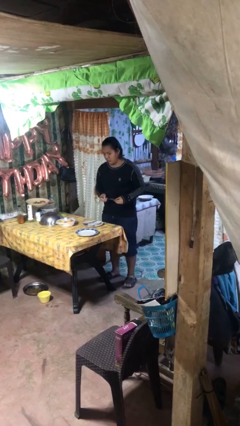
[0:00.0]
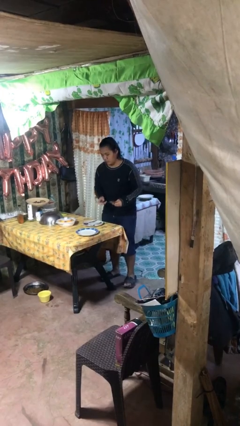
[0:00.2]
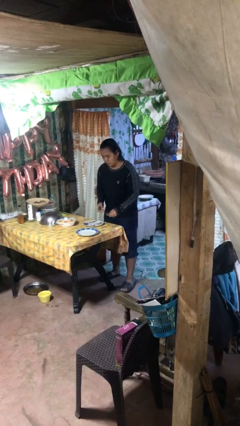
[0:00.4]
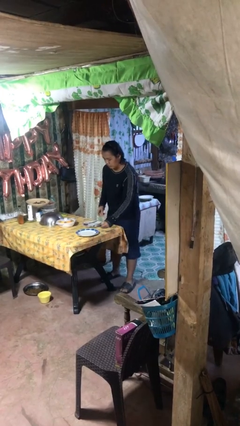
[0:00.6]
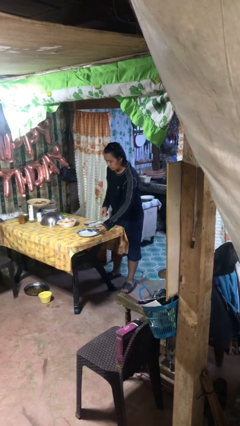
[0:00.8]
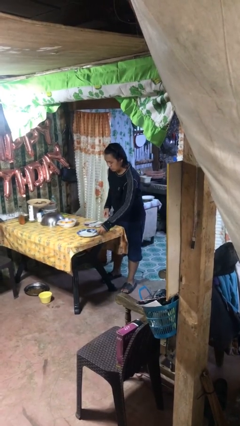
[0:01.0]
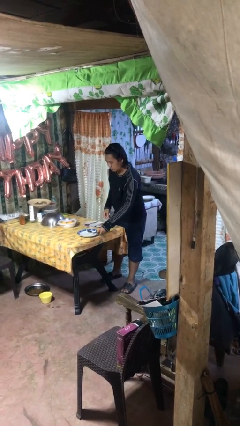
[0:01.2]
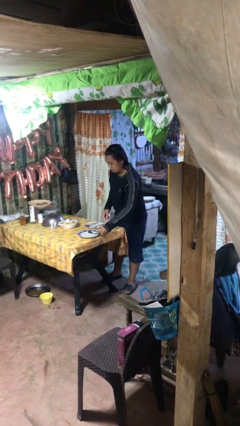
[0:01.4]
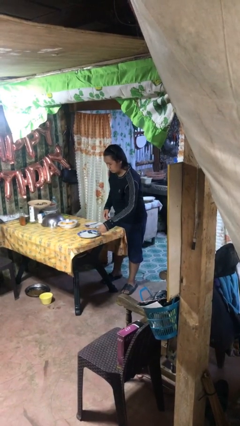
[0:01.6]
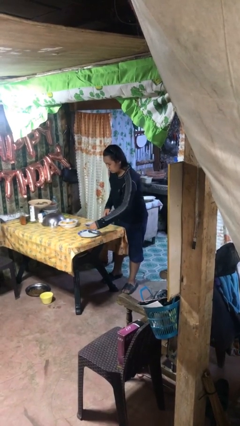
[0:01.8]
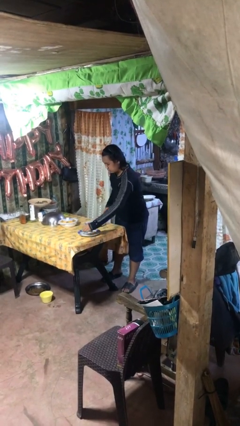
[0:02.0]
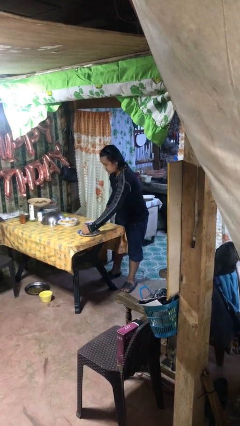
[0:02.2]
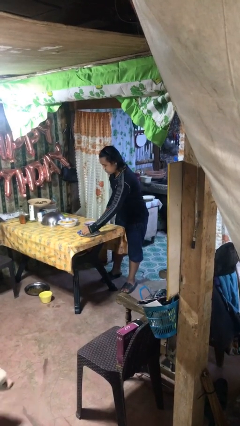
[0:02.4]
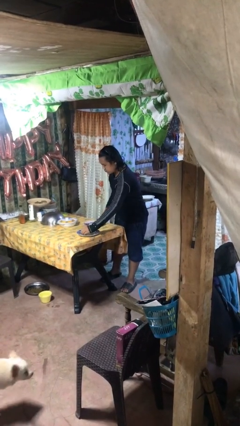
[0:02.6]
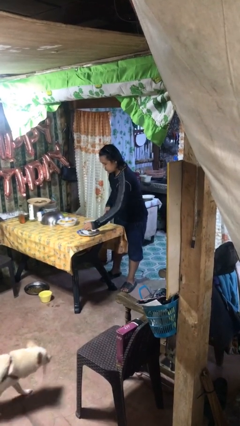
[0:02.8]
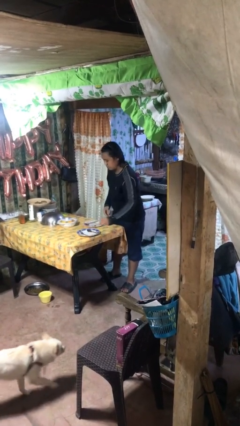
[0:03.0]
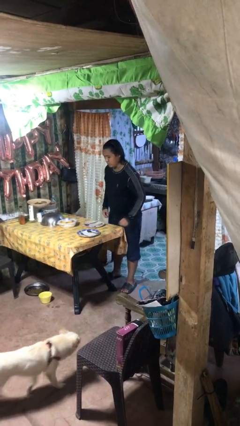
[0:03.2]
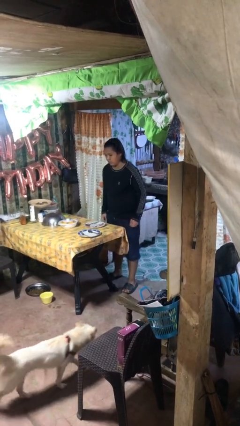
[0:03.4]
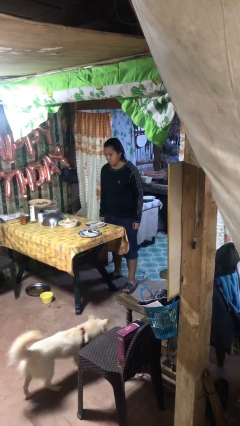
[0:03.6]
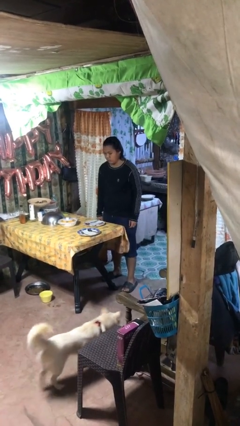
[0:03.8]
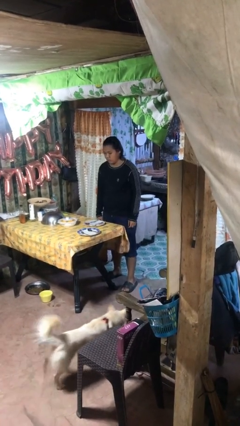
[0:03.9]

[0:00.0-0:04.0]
person sets table

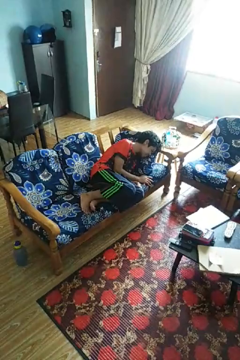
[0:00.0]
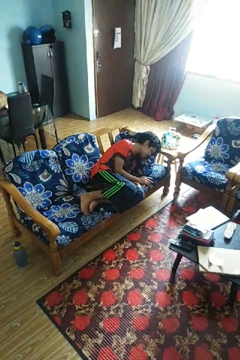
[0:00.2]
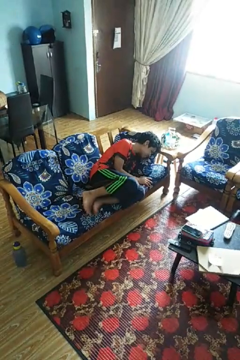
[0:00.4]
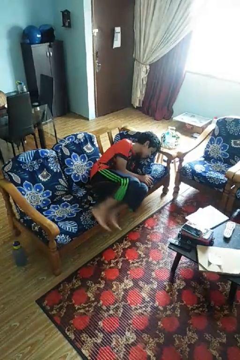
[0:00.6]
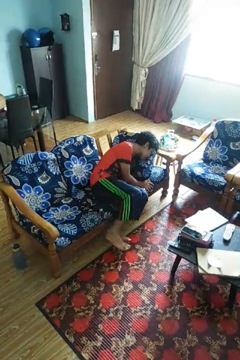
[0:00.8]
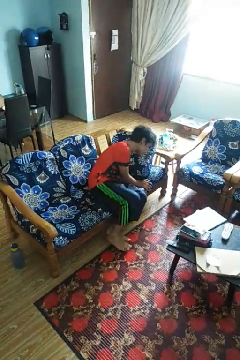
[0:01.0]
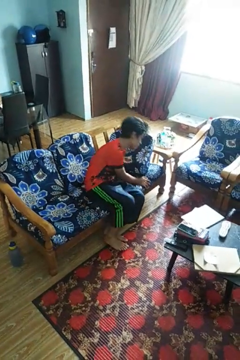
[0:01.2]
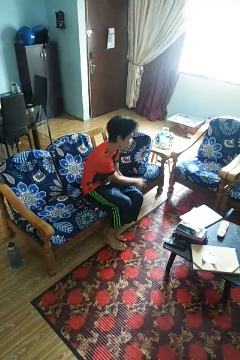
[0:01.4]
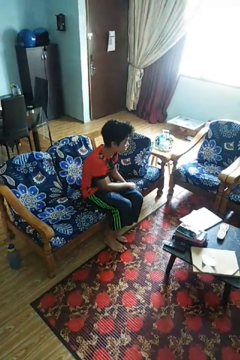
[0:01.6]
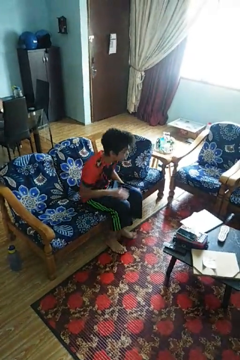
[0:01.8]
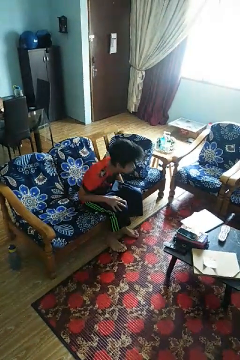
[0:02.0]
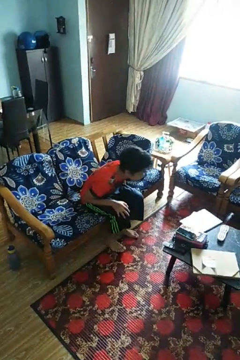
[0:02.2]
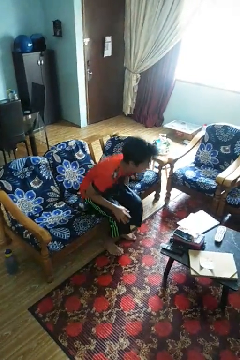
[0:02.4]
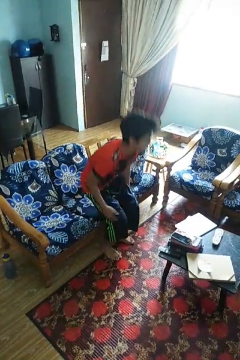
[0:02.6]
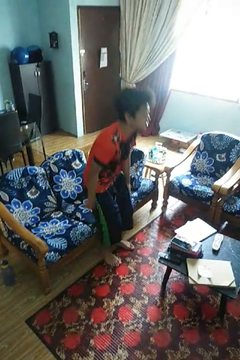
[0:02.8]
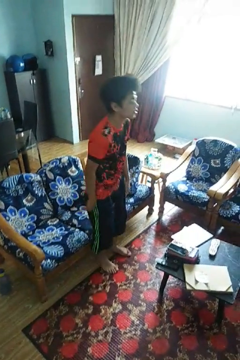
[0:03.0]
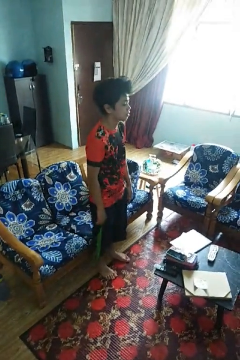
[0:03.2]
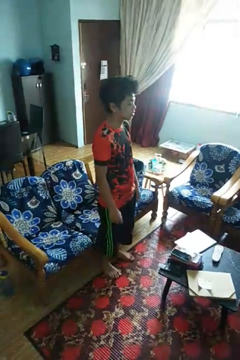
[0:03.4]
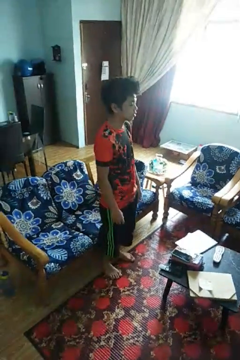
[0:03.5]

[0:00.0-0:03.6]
person stands up

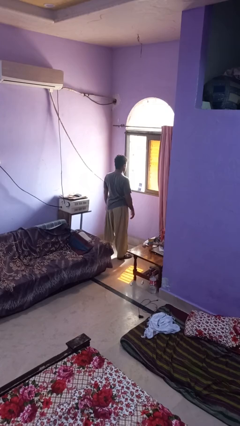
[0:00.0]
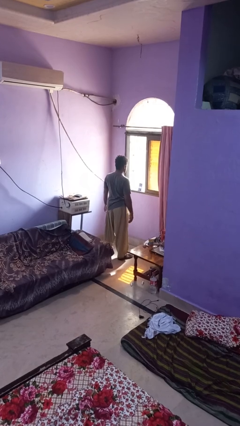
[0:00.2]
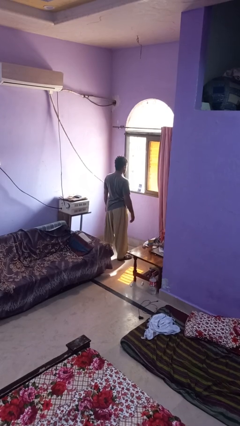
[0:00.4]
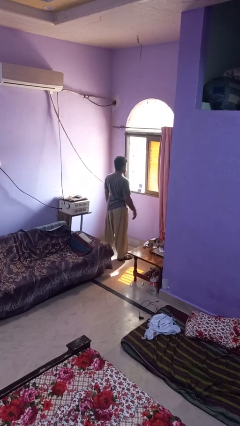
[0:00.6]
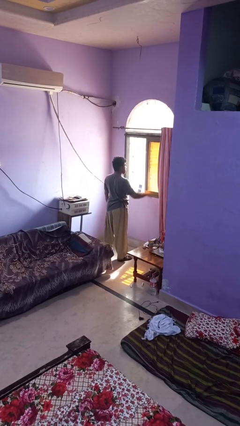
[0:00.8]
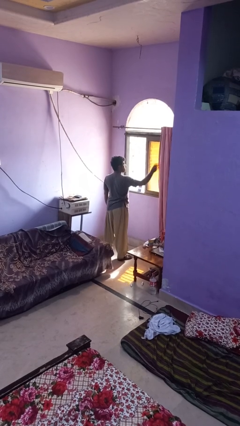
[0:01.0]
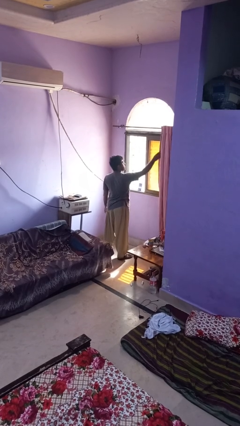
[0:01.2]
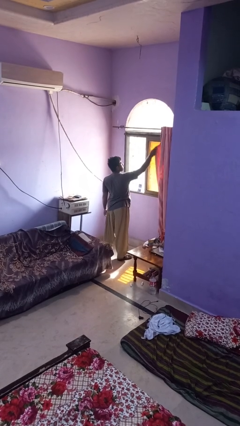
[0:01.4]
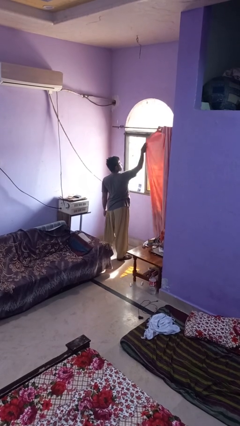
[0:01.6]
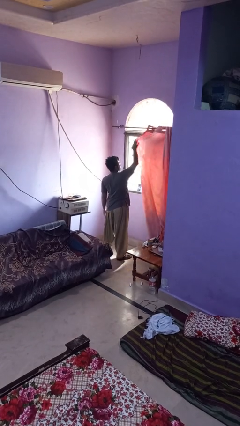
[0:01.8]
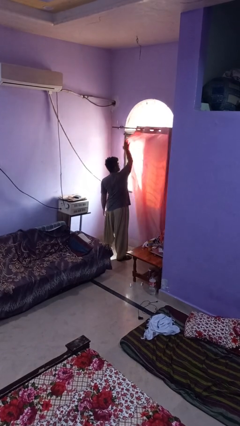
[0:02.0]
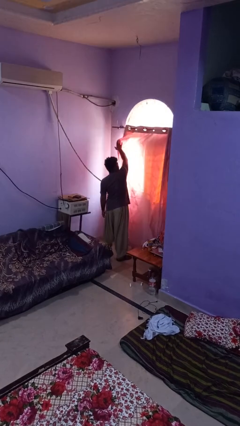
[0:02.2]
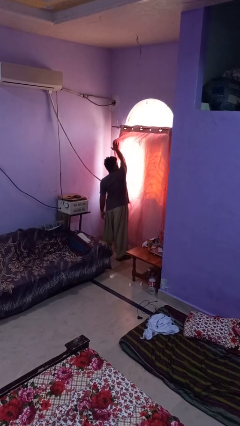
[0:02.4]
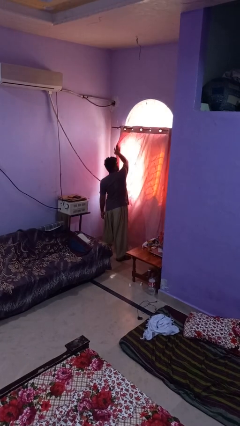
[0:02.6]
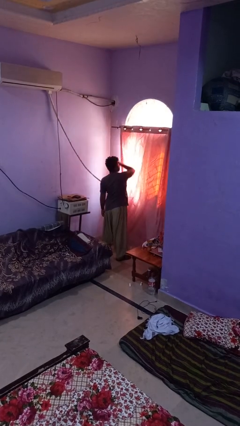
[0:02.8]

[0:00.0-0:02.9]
person closes curtains

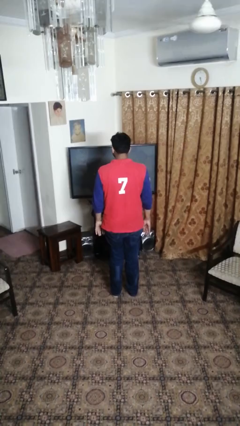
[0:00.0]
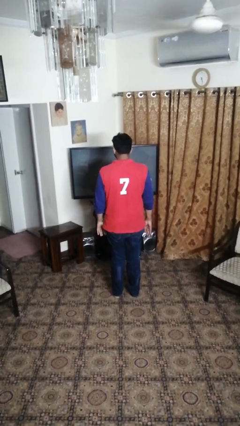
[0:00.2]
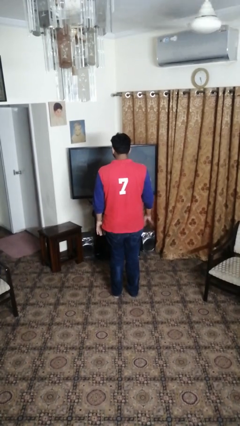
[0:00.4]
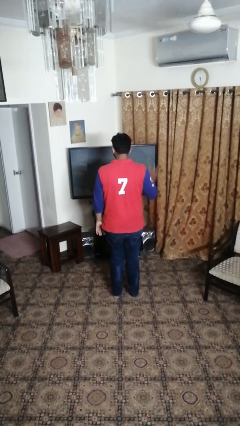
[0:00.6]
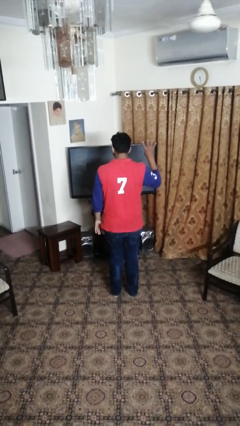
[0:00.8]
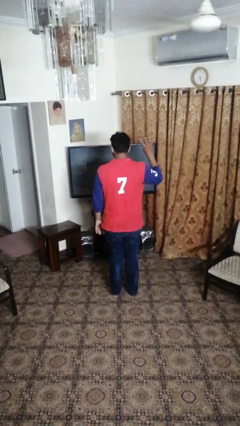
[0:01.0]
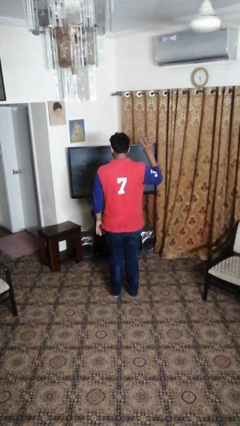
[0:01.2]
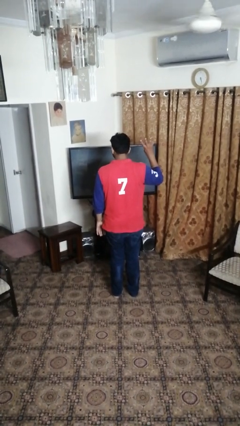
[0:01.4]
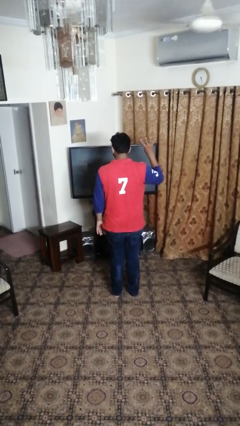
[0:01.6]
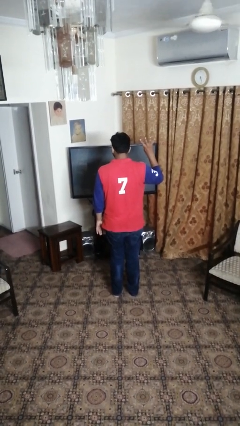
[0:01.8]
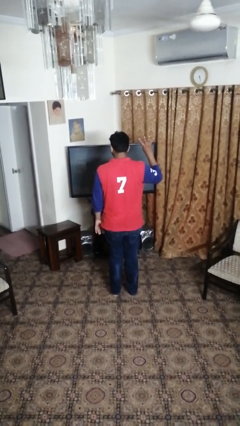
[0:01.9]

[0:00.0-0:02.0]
person gestures number four

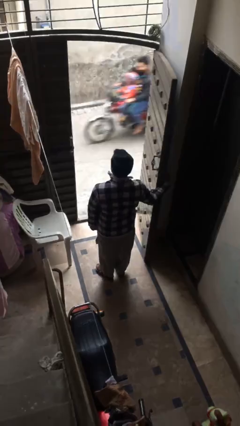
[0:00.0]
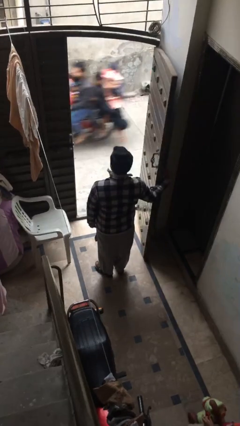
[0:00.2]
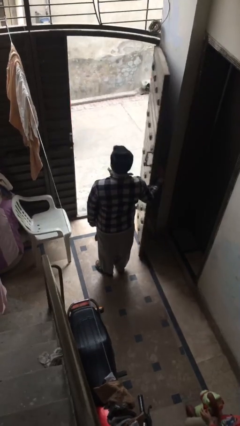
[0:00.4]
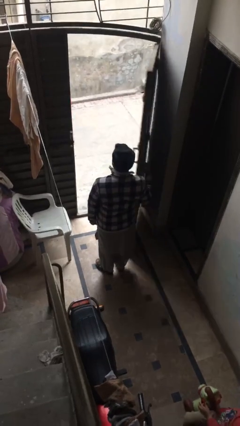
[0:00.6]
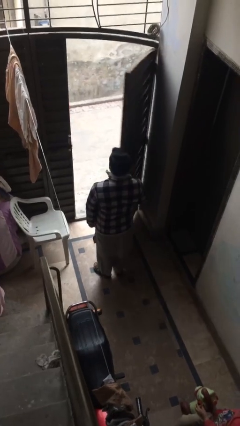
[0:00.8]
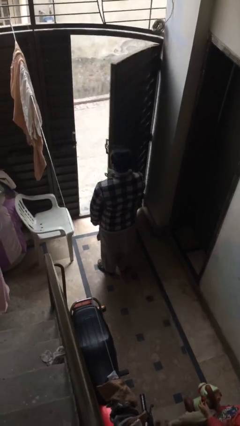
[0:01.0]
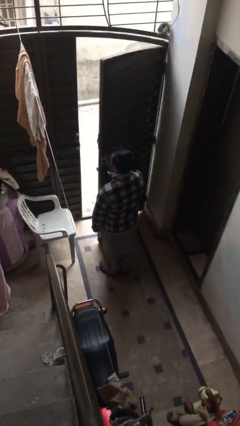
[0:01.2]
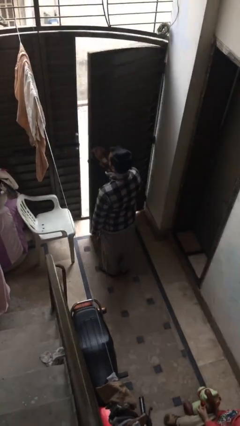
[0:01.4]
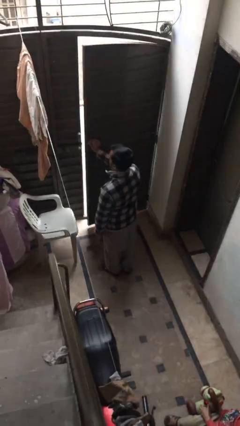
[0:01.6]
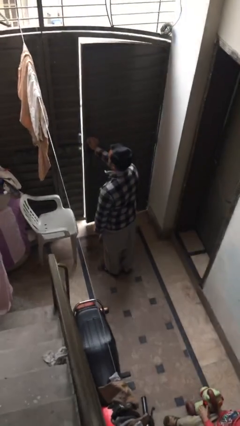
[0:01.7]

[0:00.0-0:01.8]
person closes facility door

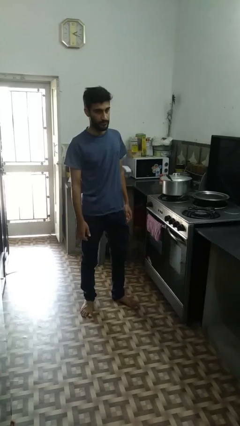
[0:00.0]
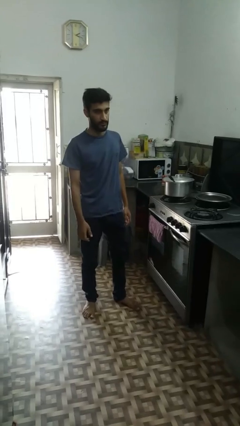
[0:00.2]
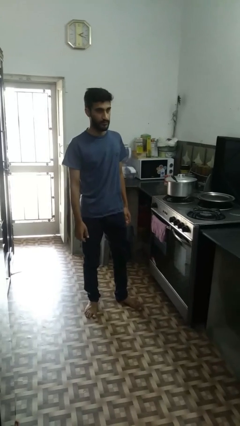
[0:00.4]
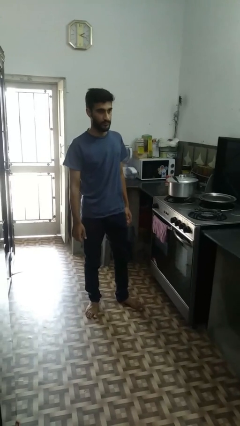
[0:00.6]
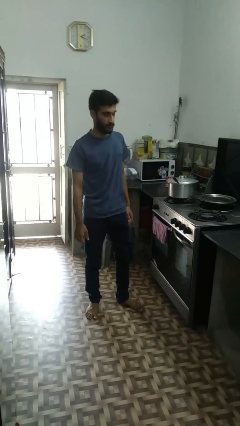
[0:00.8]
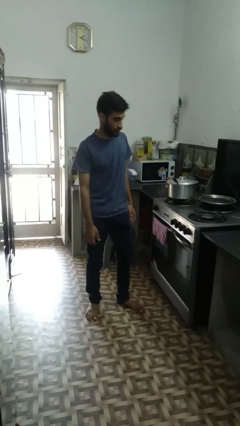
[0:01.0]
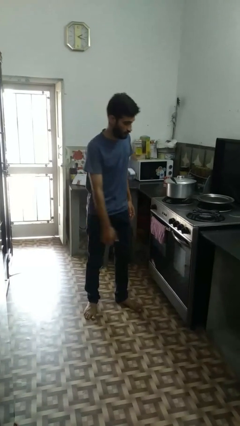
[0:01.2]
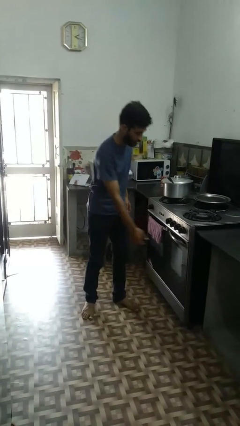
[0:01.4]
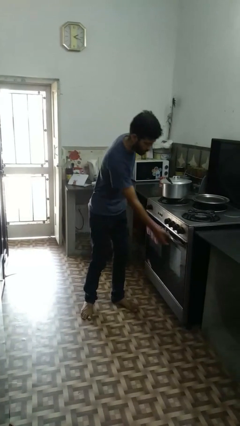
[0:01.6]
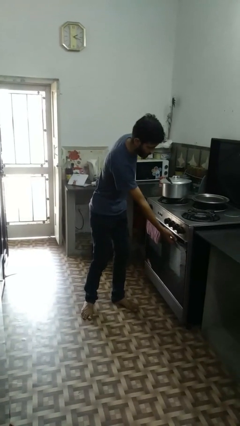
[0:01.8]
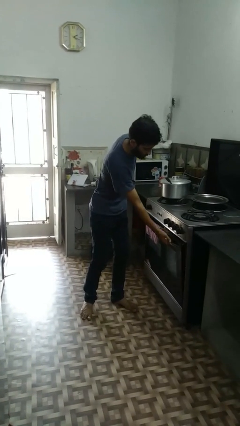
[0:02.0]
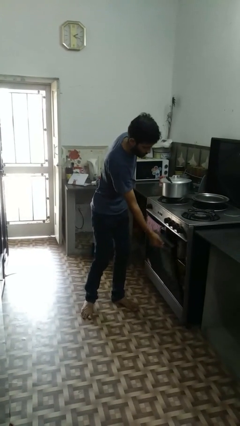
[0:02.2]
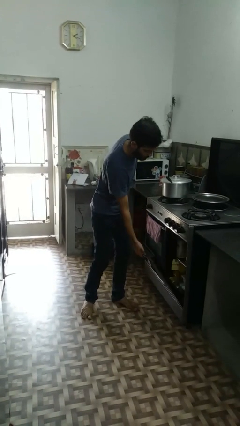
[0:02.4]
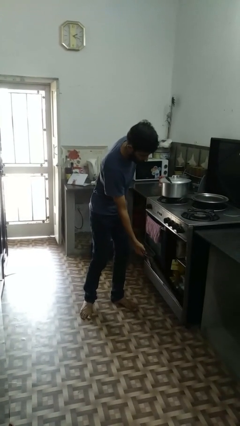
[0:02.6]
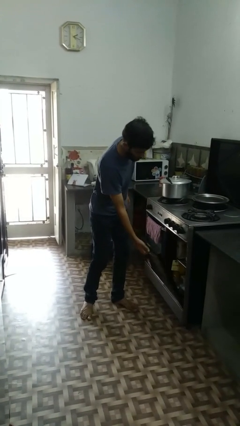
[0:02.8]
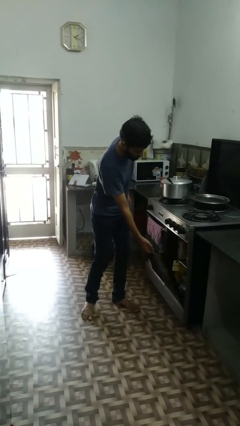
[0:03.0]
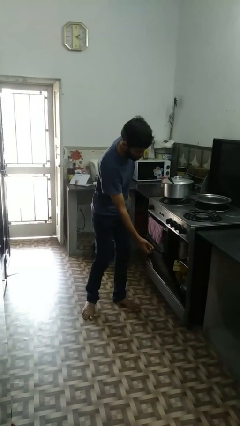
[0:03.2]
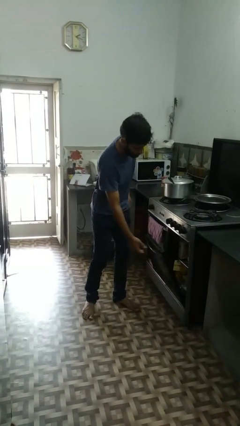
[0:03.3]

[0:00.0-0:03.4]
person opens dishwasher

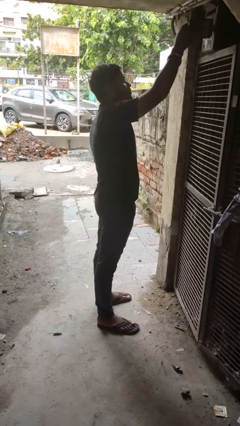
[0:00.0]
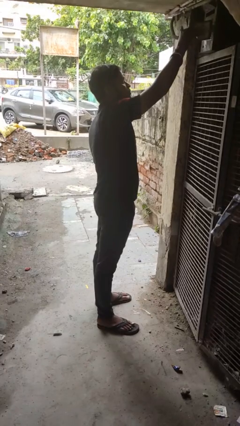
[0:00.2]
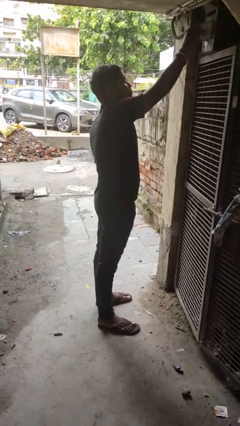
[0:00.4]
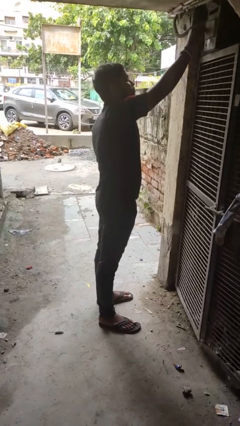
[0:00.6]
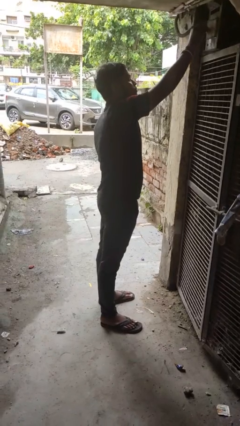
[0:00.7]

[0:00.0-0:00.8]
person closes mailbox
